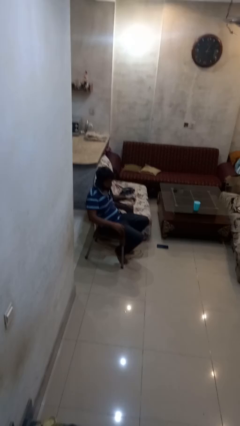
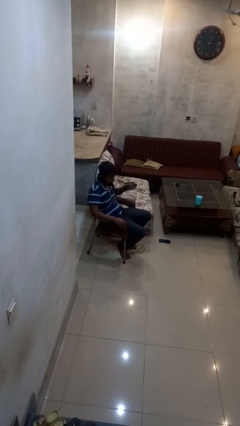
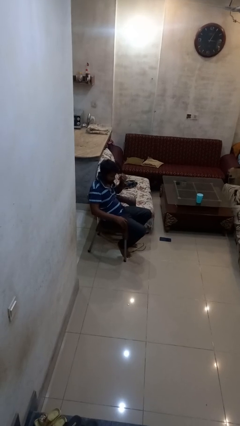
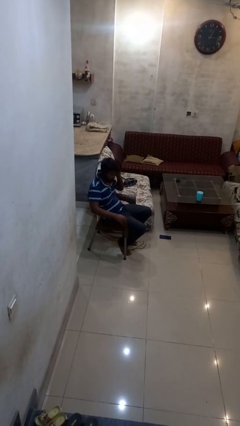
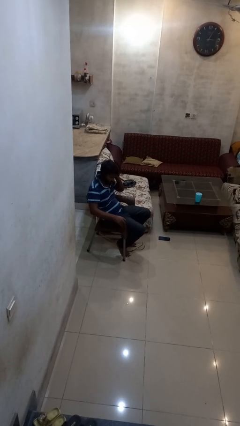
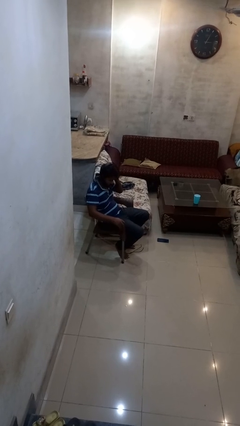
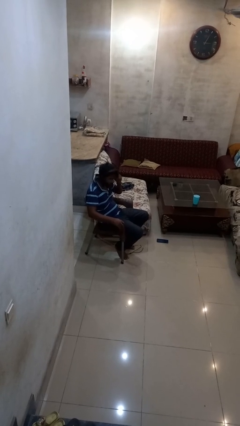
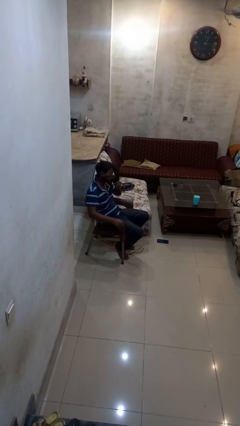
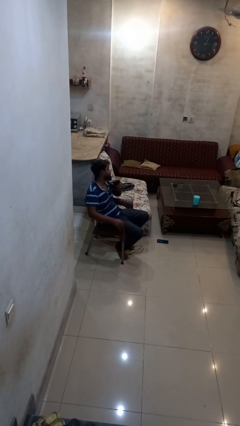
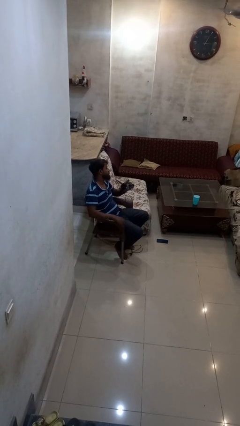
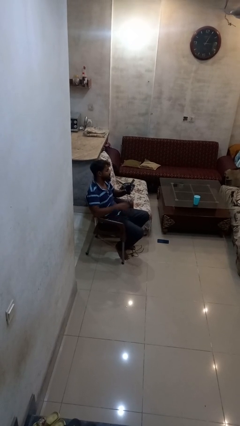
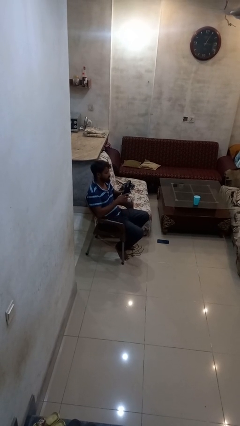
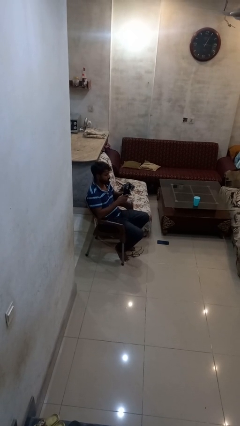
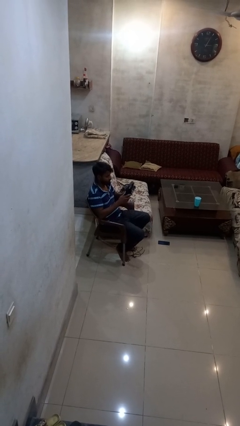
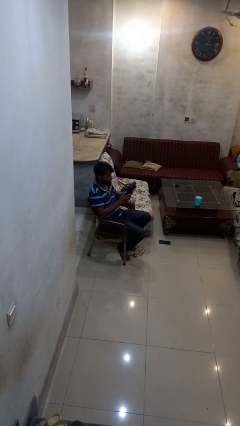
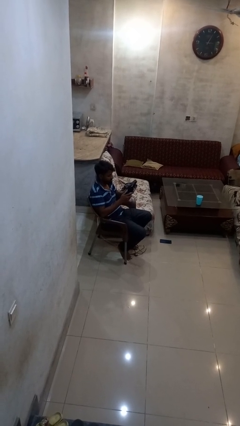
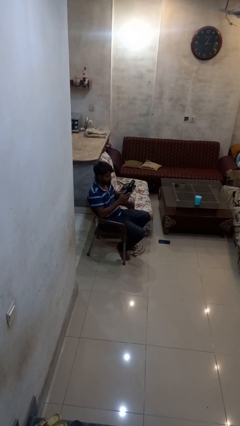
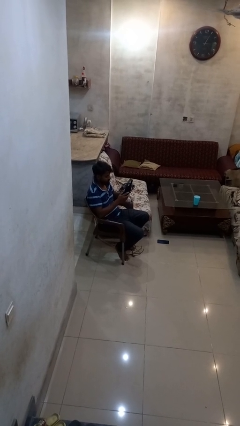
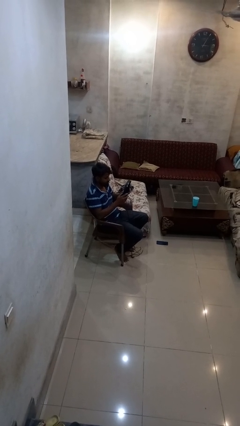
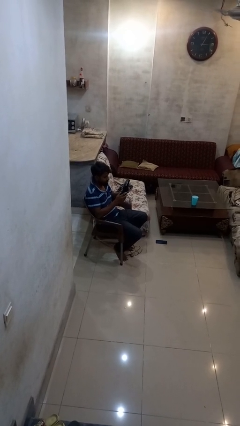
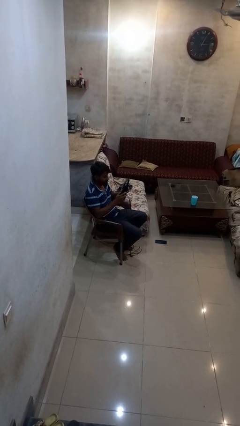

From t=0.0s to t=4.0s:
person takes off headphones

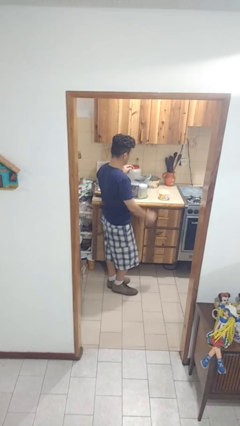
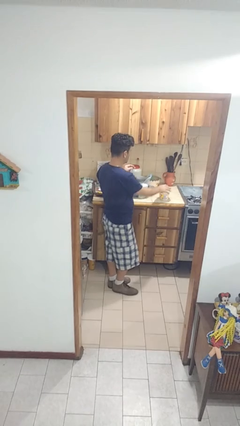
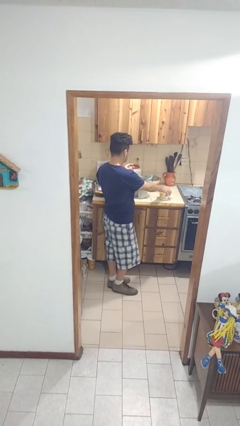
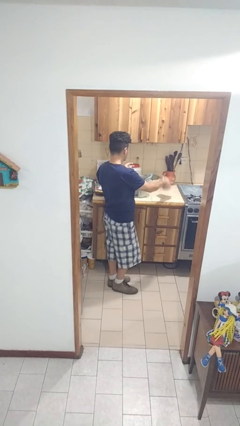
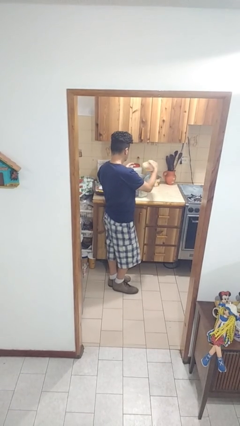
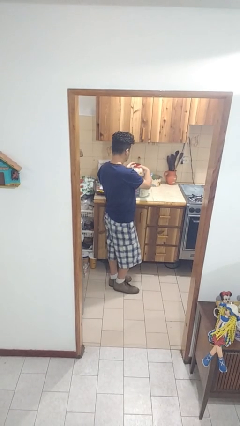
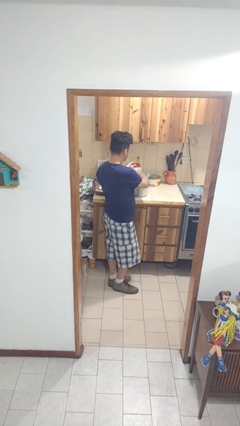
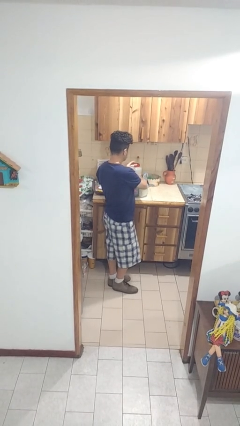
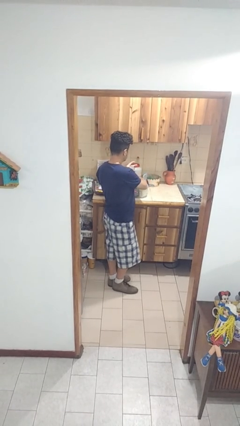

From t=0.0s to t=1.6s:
person puts object into bag

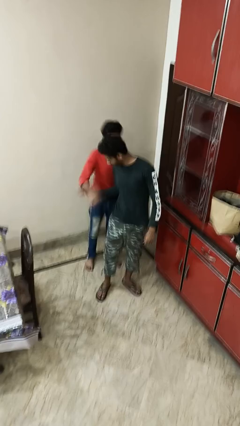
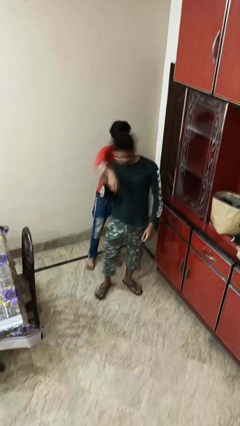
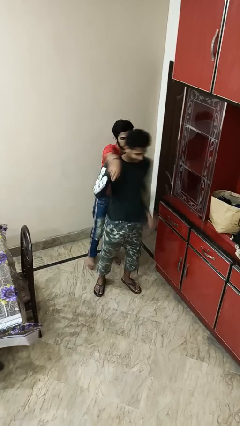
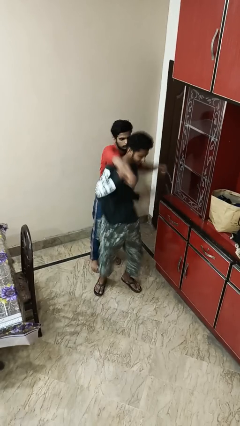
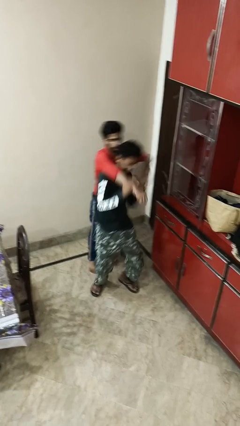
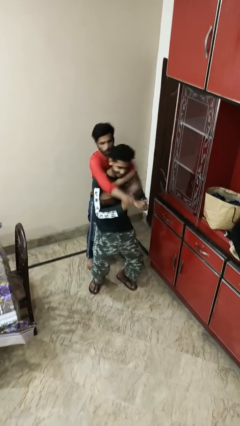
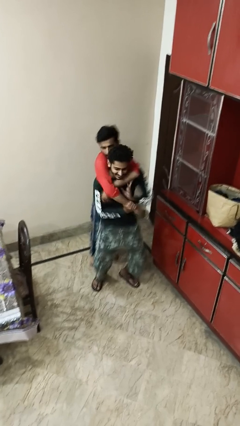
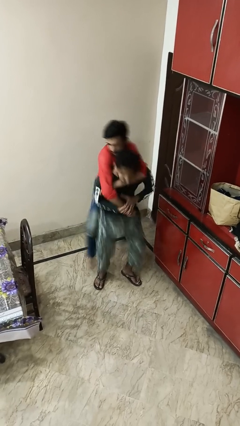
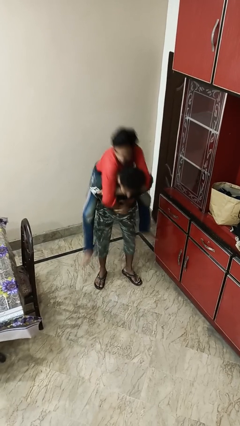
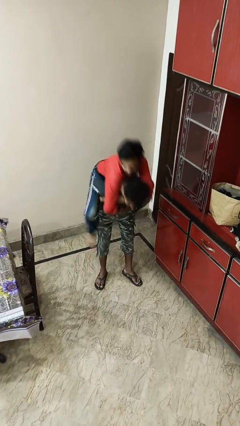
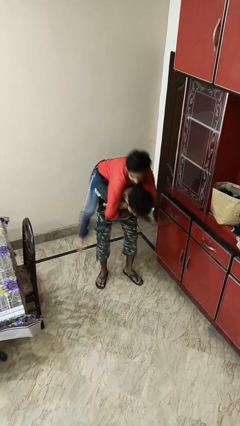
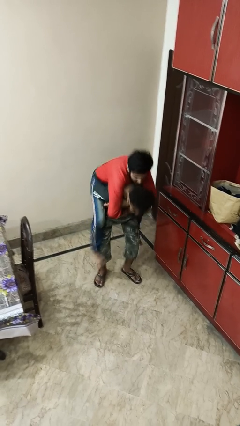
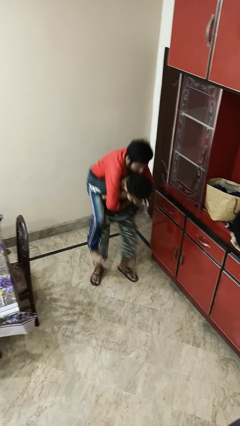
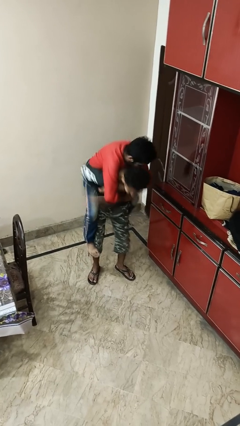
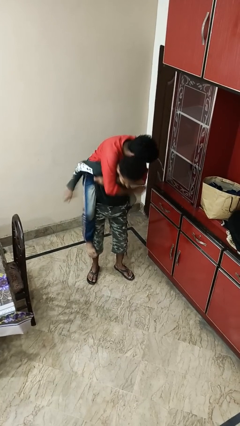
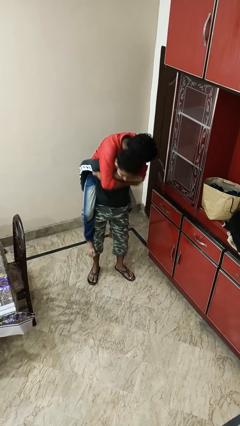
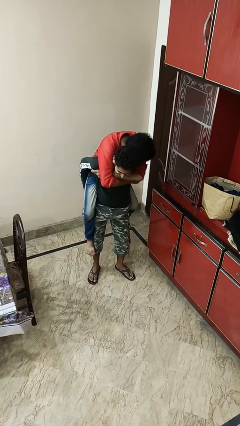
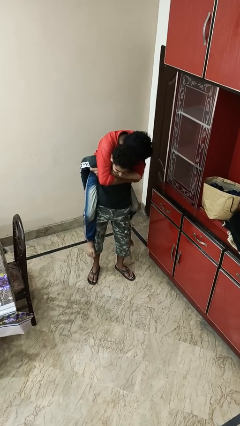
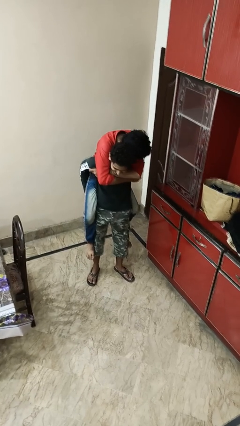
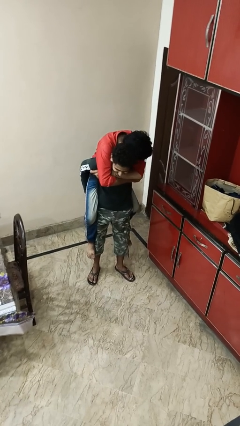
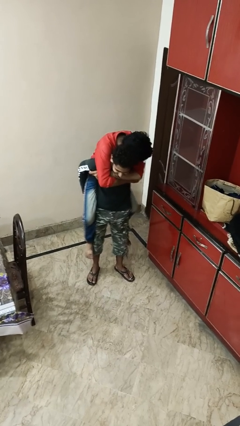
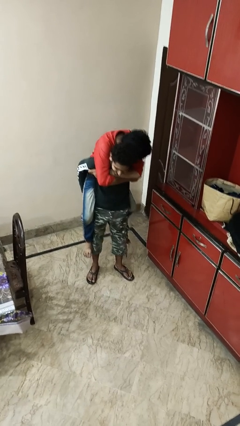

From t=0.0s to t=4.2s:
person carries person over shoulder

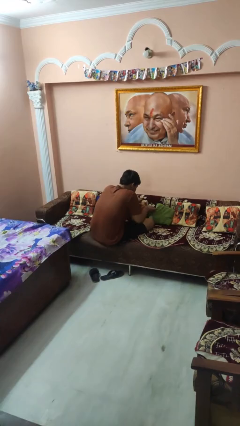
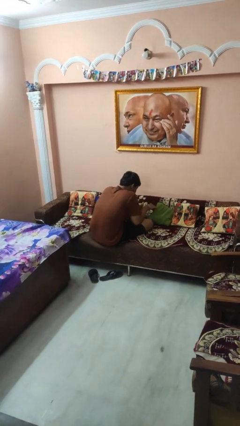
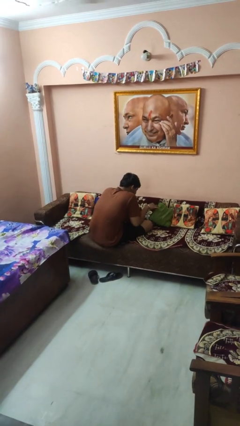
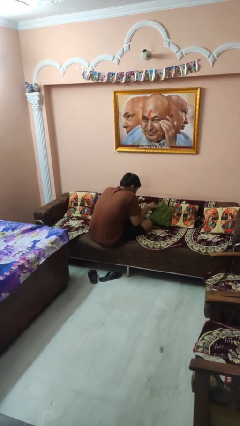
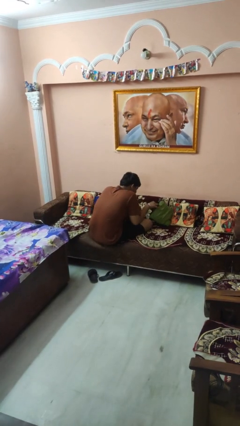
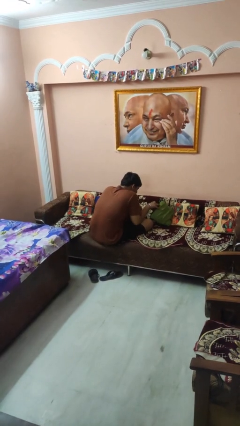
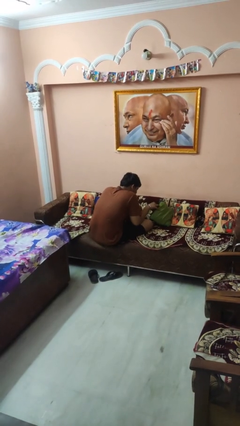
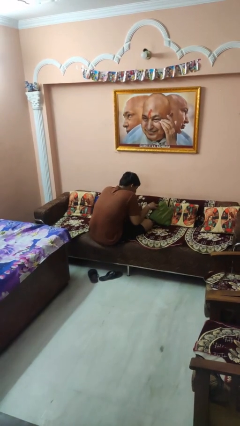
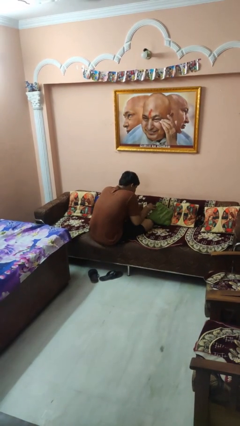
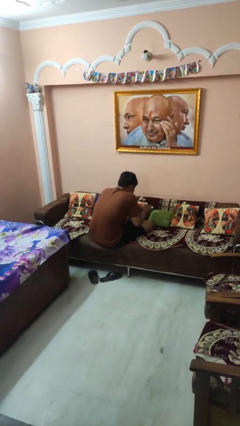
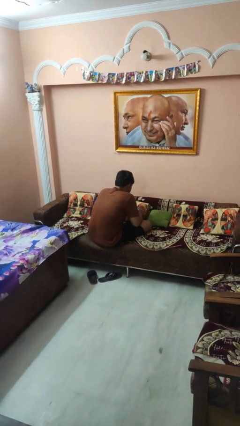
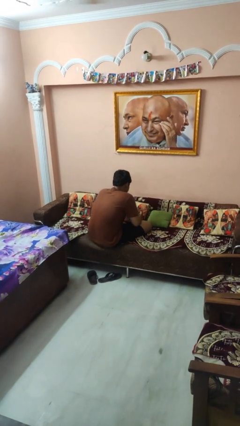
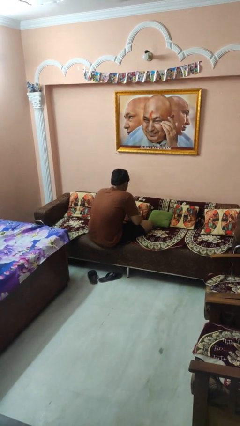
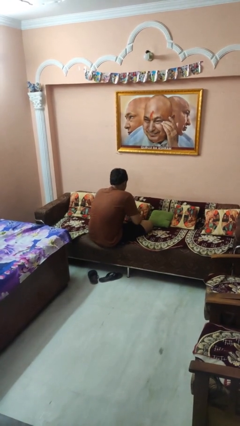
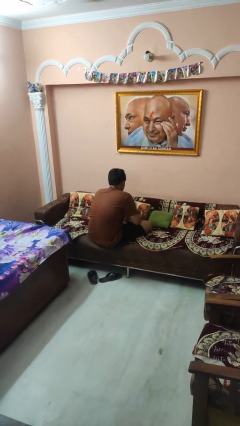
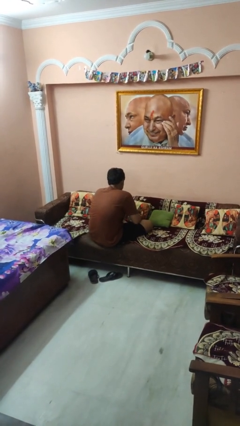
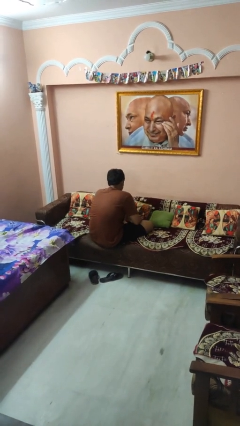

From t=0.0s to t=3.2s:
person searches in couch

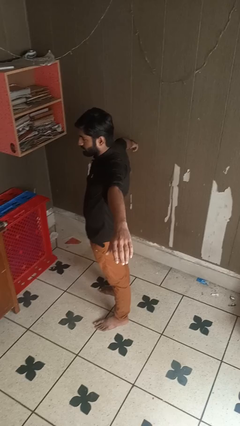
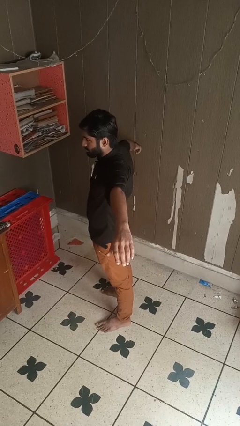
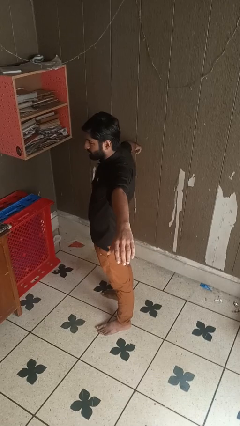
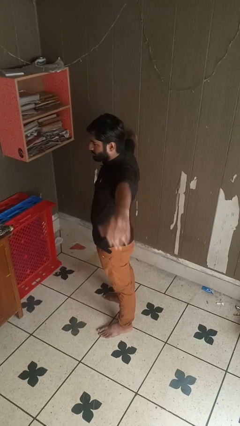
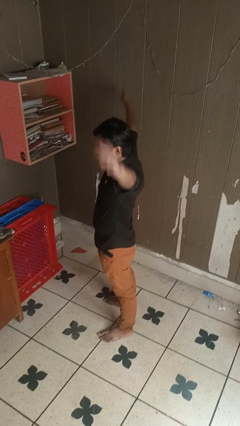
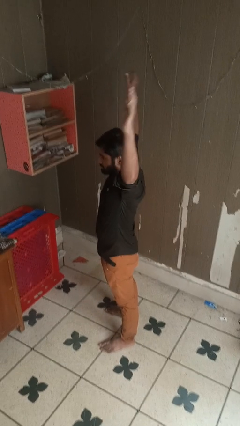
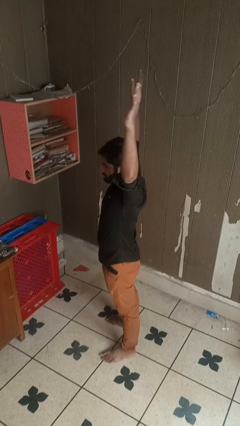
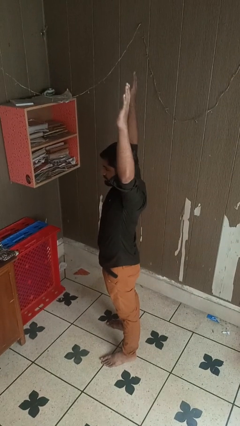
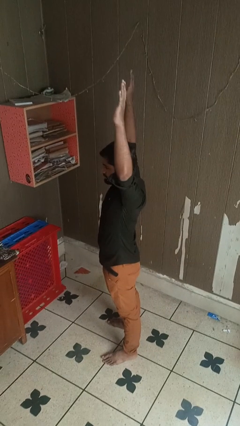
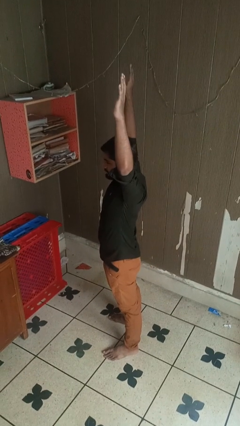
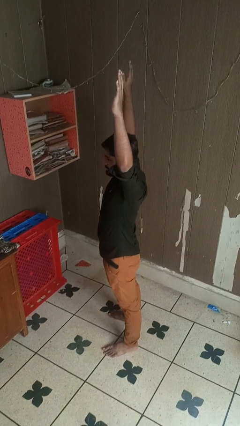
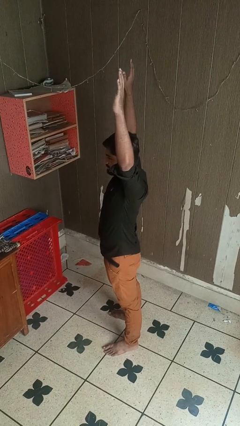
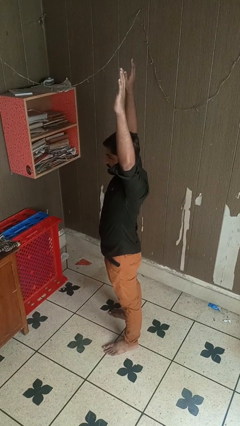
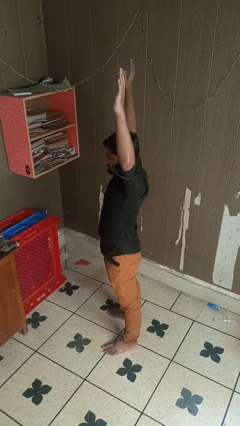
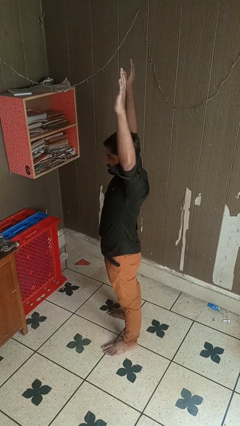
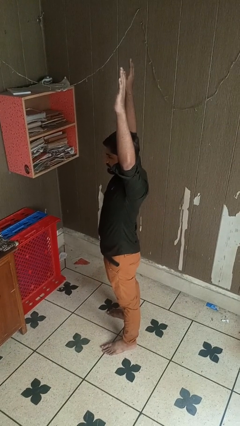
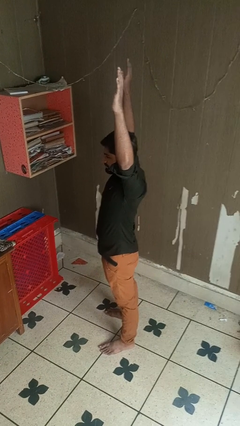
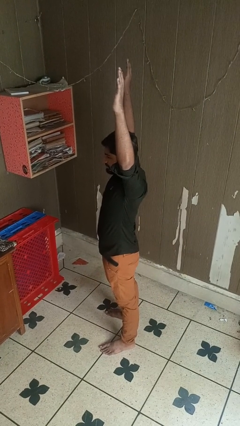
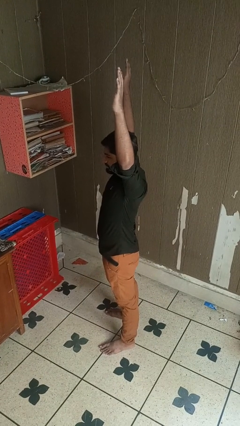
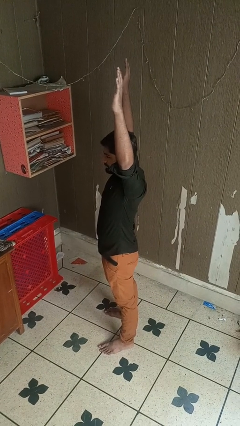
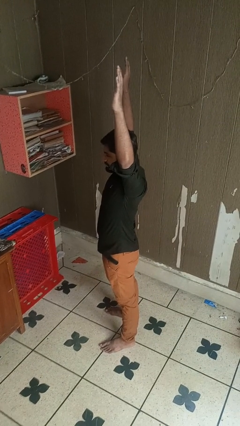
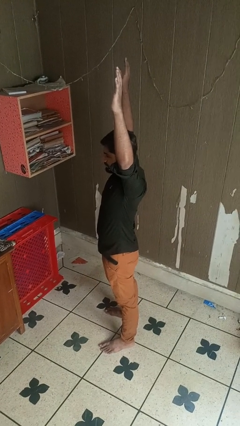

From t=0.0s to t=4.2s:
person stretches arms over head
